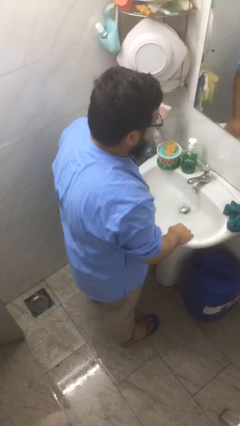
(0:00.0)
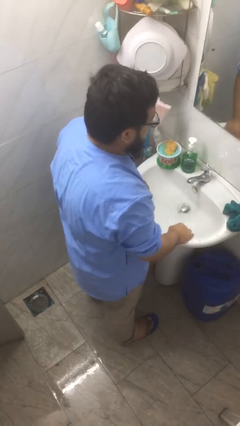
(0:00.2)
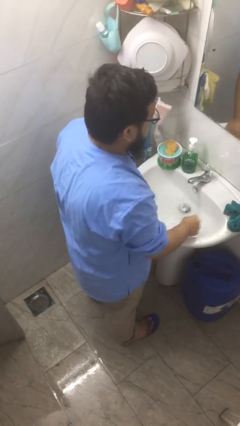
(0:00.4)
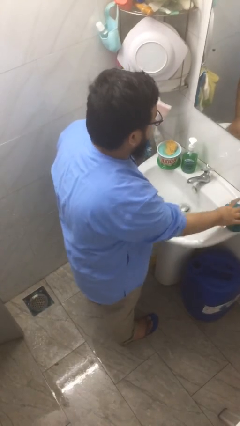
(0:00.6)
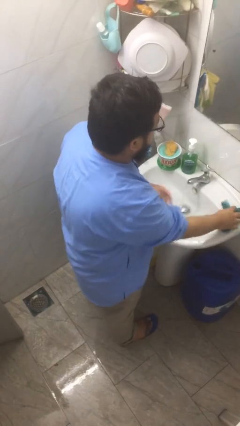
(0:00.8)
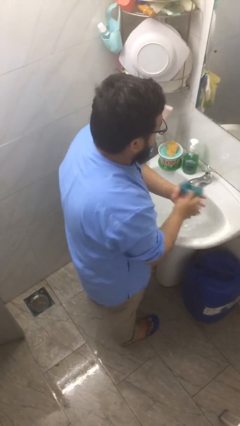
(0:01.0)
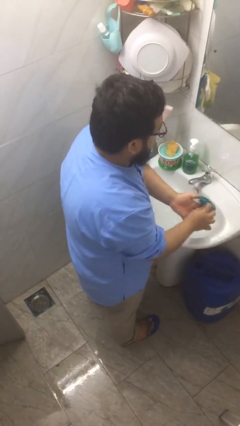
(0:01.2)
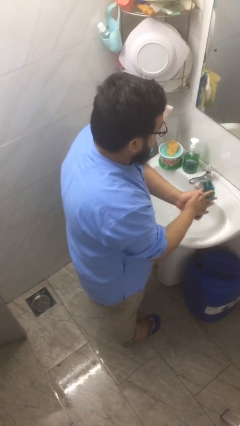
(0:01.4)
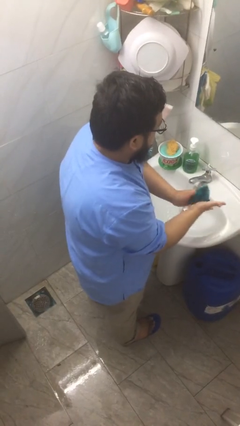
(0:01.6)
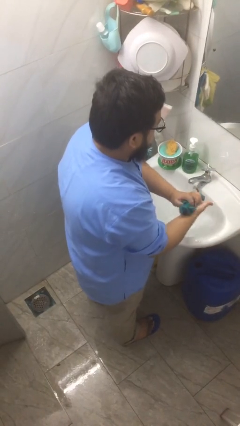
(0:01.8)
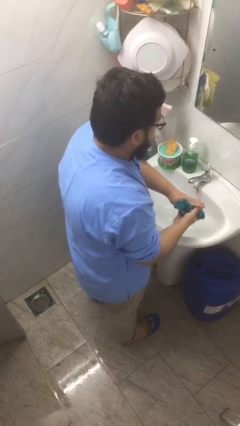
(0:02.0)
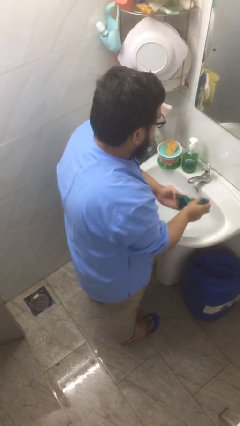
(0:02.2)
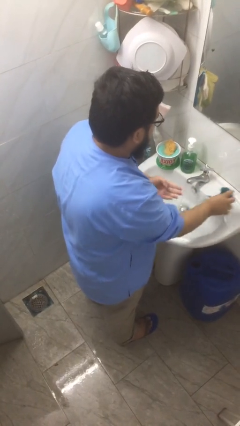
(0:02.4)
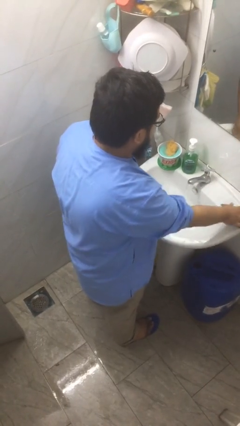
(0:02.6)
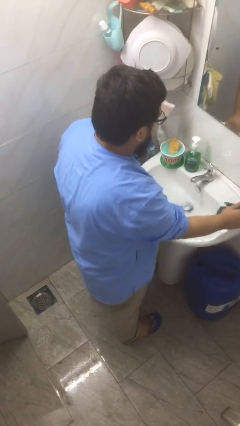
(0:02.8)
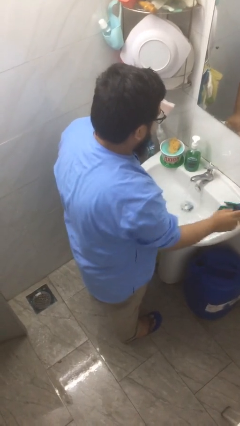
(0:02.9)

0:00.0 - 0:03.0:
person dries hands with towel

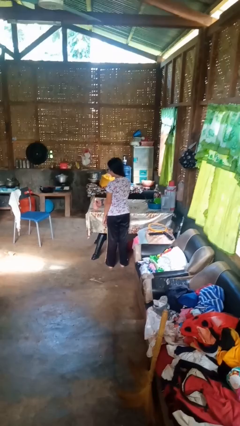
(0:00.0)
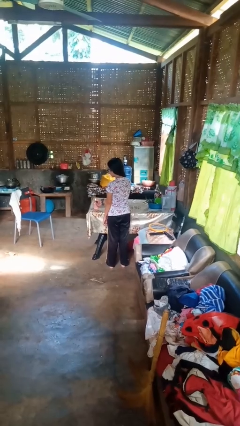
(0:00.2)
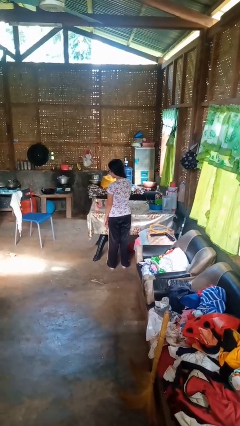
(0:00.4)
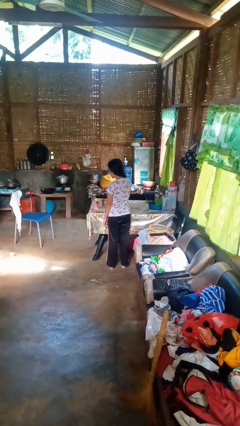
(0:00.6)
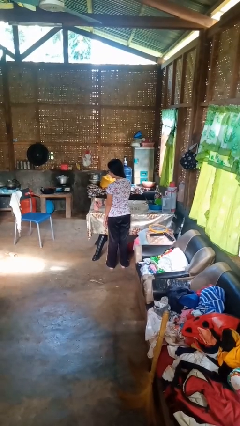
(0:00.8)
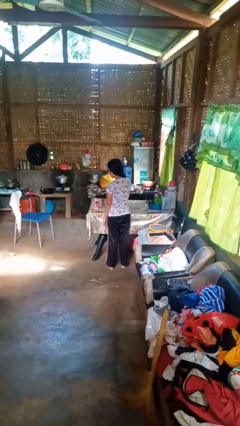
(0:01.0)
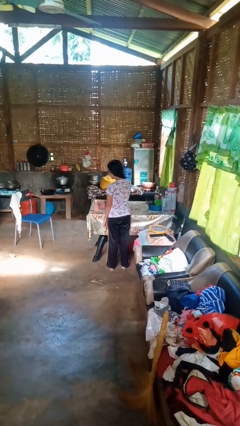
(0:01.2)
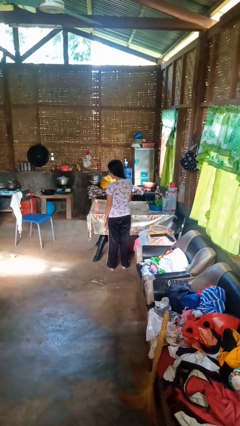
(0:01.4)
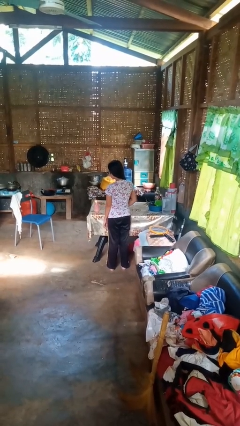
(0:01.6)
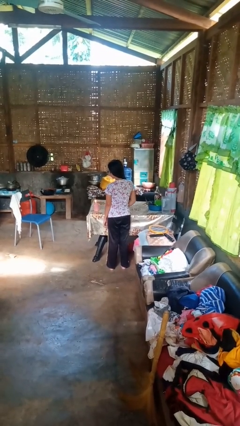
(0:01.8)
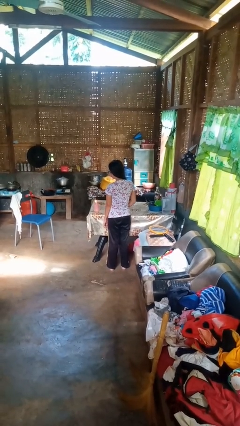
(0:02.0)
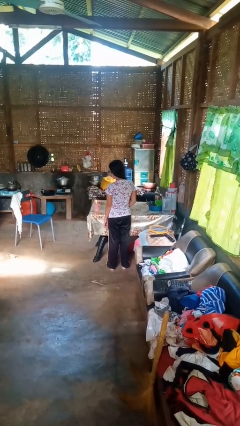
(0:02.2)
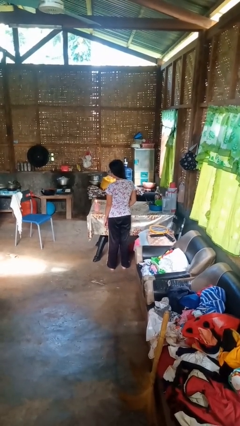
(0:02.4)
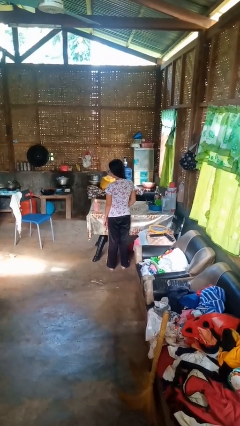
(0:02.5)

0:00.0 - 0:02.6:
person lights candle

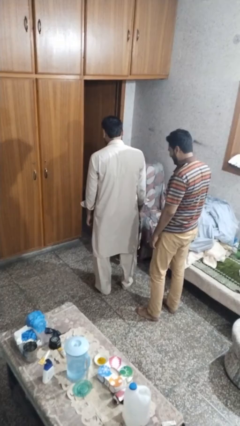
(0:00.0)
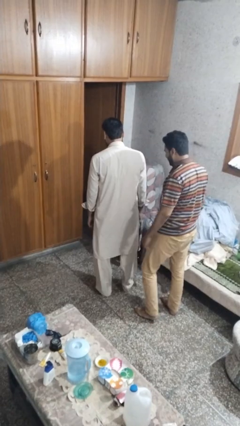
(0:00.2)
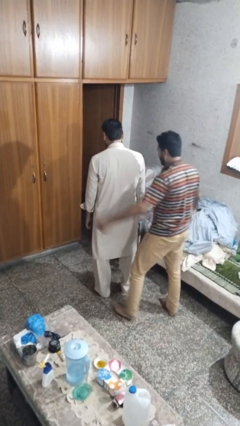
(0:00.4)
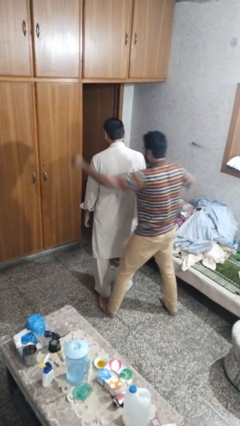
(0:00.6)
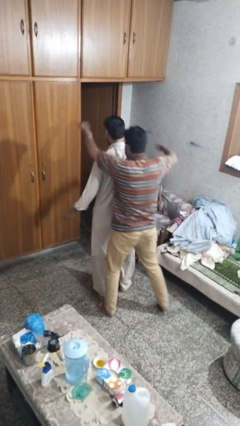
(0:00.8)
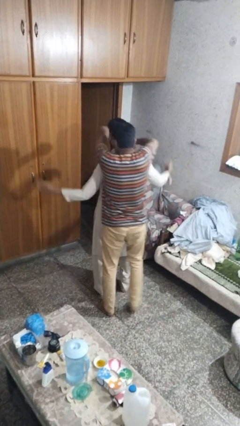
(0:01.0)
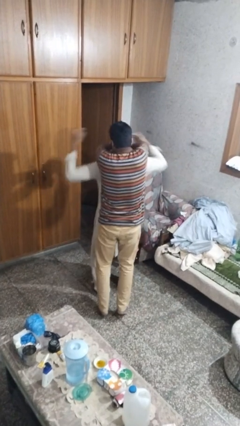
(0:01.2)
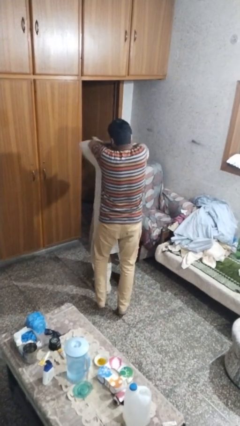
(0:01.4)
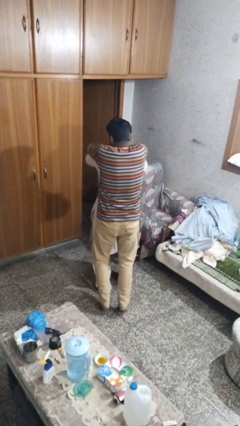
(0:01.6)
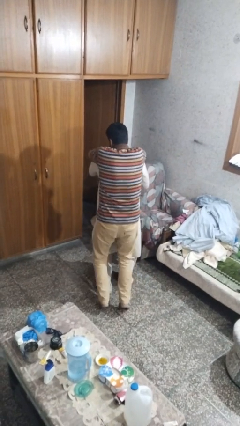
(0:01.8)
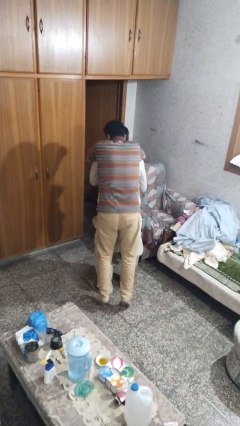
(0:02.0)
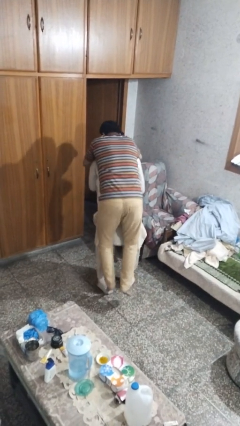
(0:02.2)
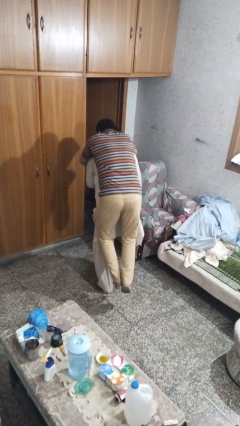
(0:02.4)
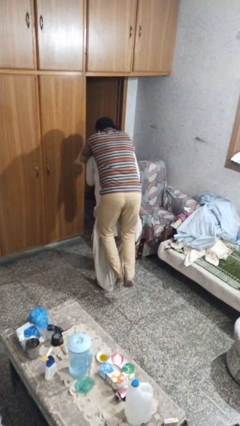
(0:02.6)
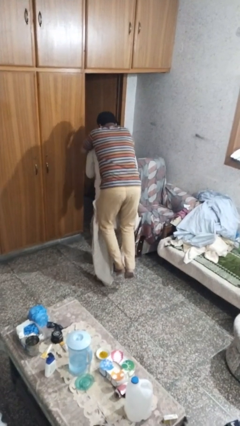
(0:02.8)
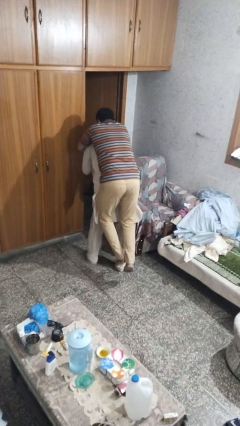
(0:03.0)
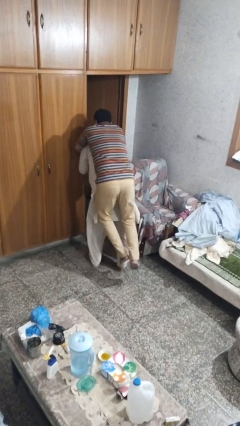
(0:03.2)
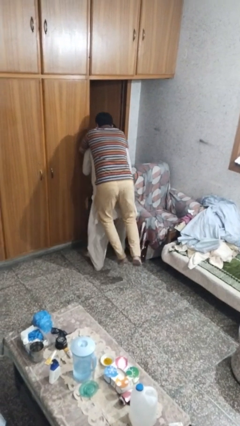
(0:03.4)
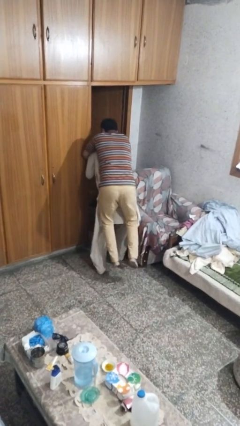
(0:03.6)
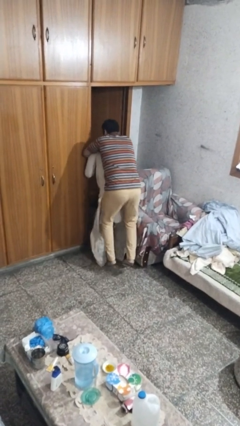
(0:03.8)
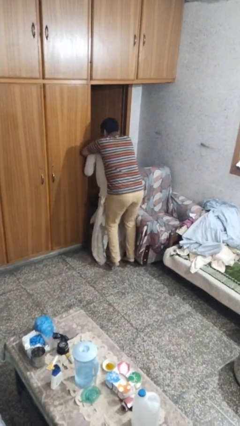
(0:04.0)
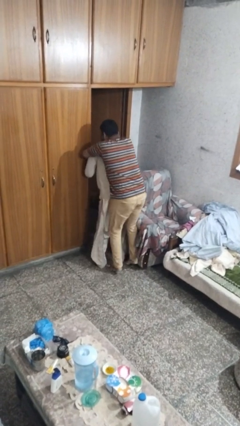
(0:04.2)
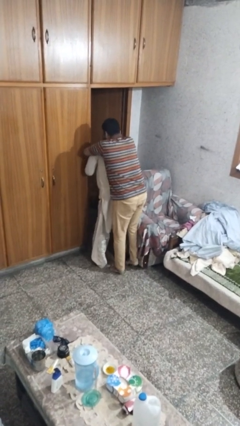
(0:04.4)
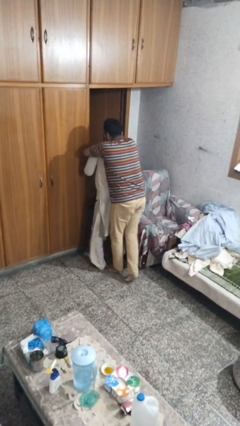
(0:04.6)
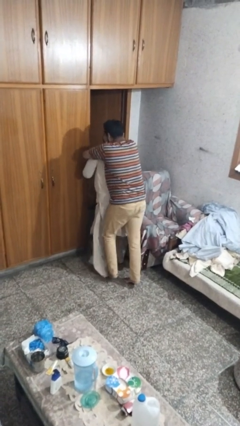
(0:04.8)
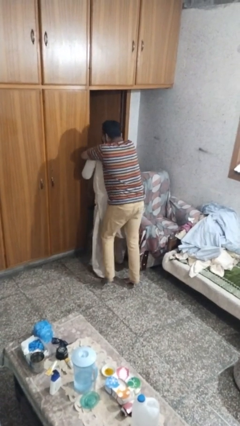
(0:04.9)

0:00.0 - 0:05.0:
person carries person on back

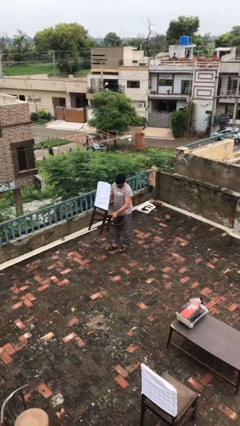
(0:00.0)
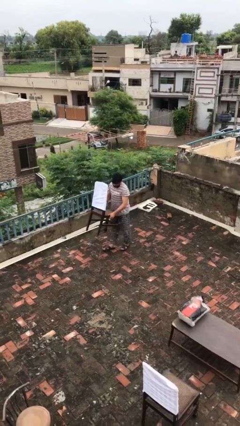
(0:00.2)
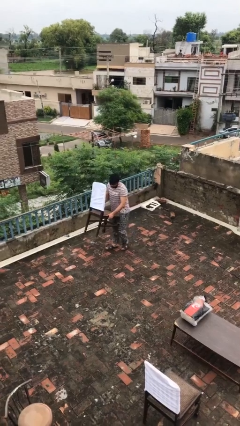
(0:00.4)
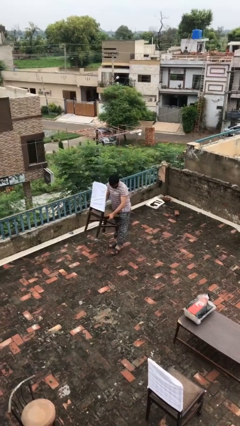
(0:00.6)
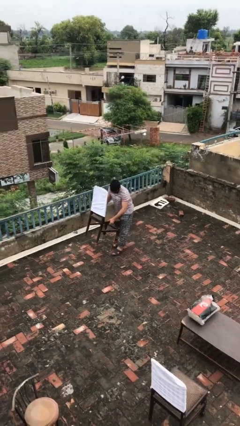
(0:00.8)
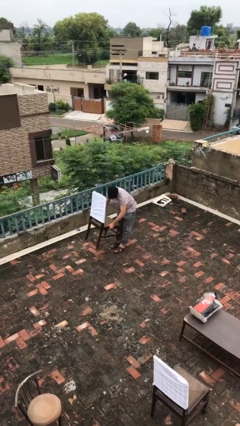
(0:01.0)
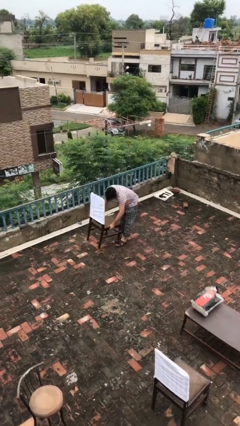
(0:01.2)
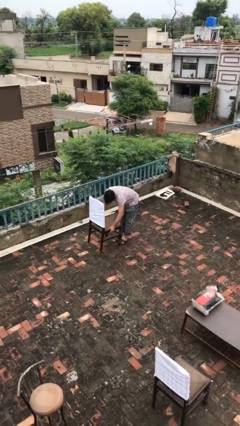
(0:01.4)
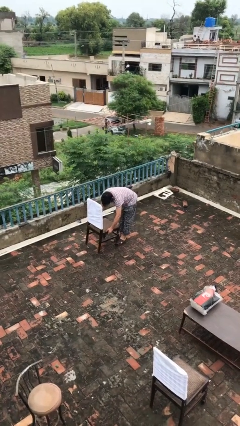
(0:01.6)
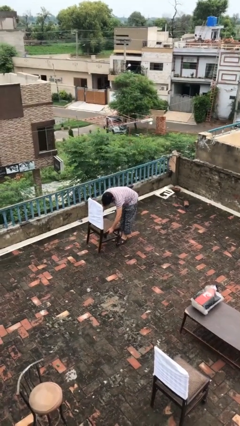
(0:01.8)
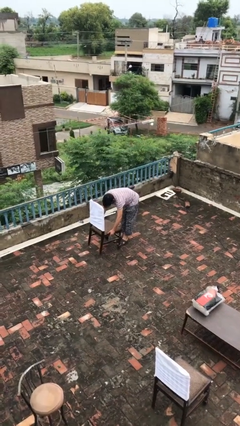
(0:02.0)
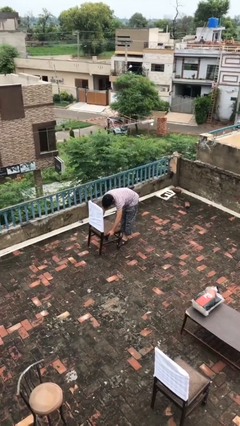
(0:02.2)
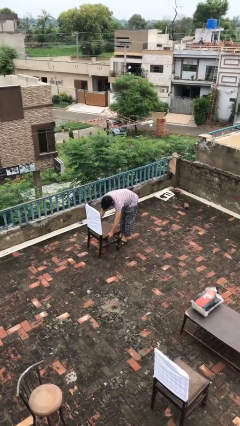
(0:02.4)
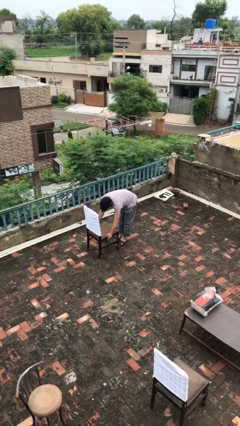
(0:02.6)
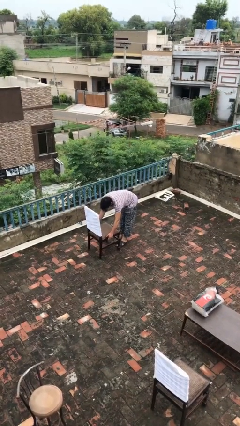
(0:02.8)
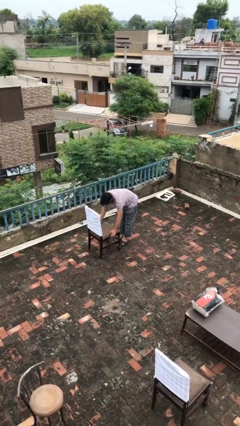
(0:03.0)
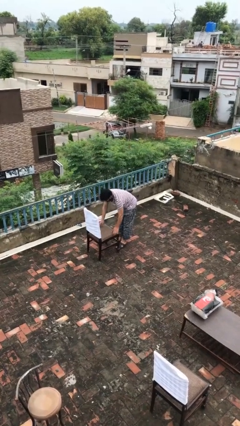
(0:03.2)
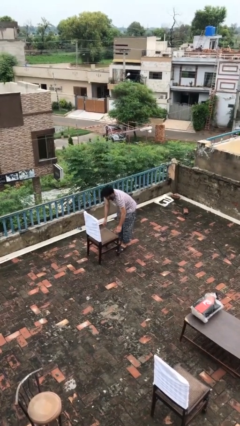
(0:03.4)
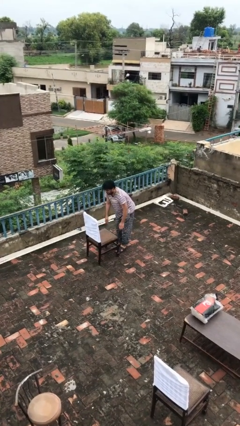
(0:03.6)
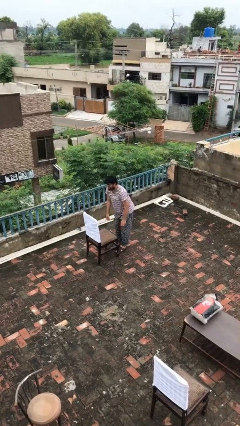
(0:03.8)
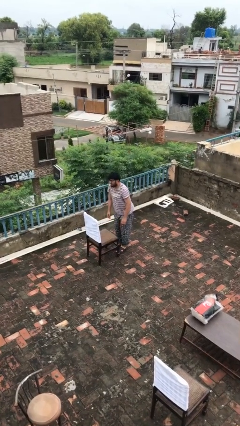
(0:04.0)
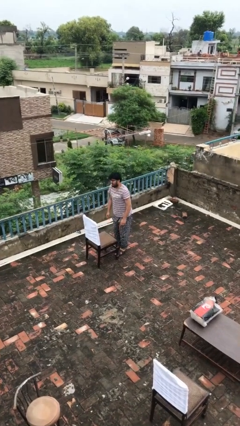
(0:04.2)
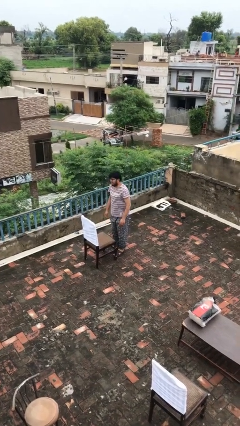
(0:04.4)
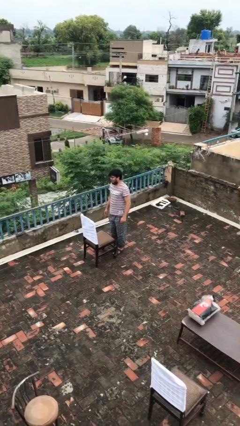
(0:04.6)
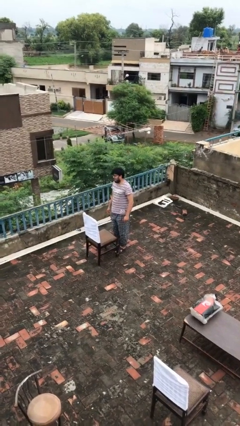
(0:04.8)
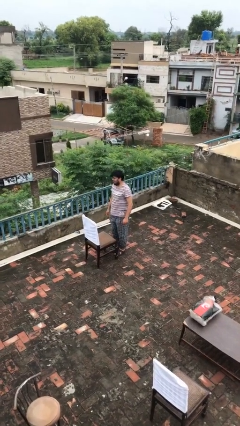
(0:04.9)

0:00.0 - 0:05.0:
person puts down object on floor

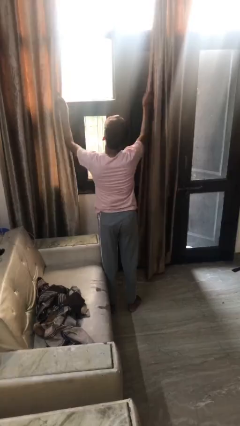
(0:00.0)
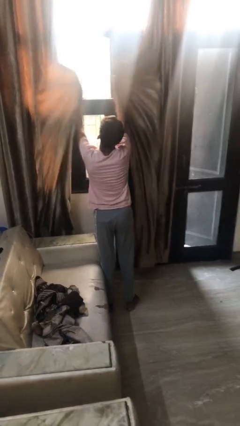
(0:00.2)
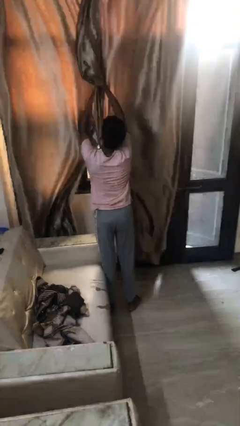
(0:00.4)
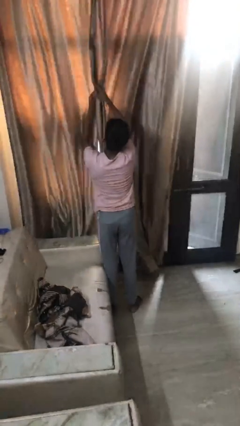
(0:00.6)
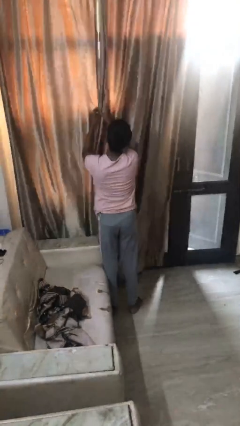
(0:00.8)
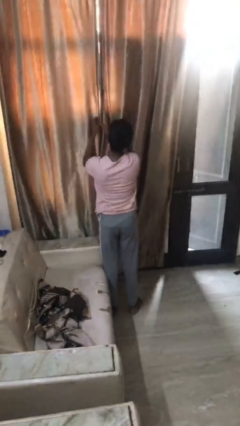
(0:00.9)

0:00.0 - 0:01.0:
person closes curtains

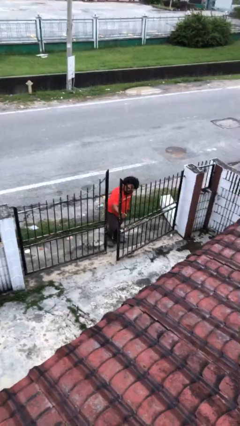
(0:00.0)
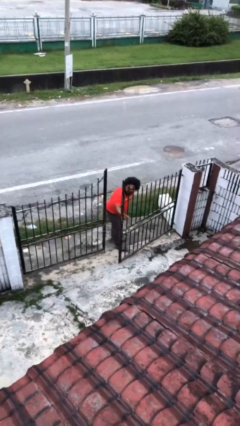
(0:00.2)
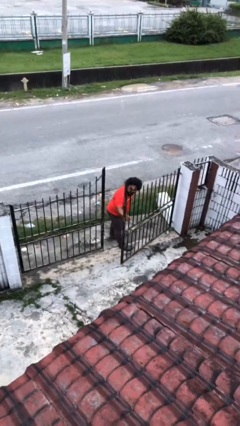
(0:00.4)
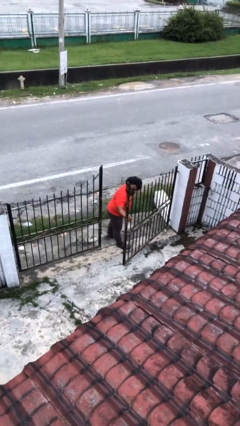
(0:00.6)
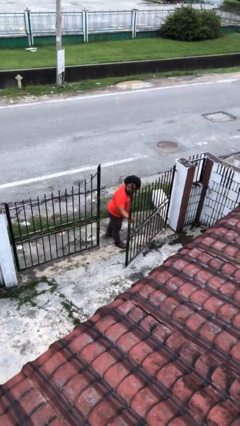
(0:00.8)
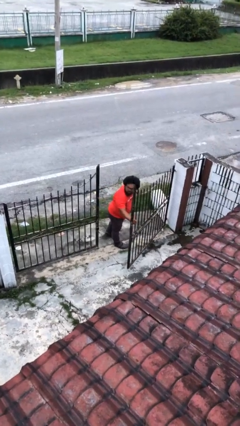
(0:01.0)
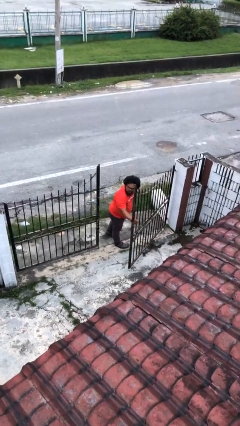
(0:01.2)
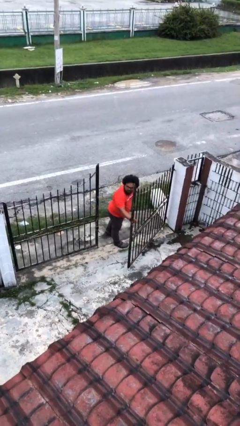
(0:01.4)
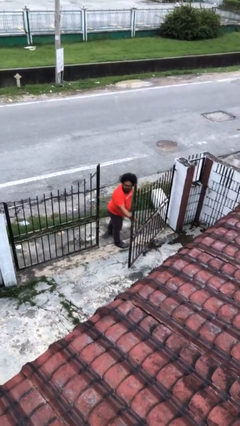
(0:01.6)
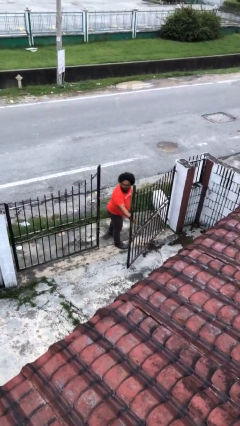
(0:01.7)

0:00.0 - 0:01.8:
person opens facility door
